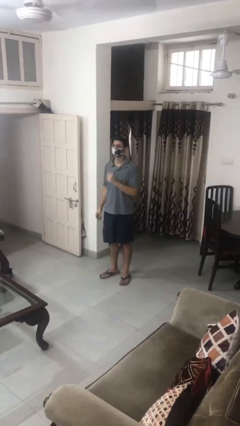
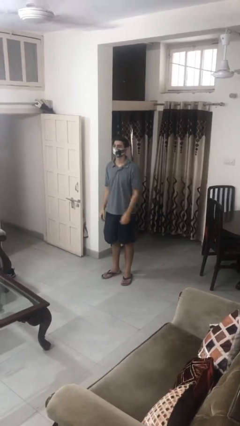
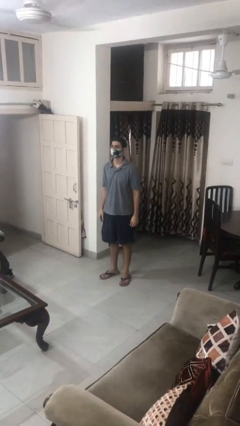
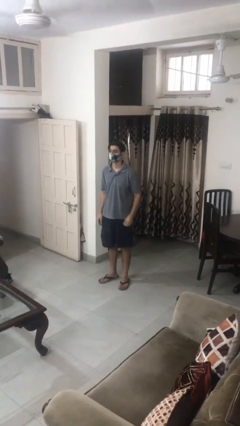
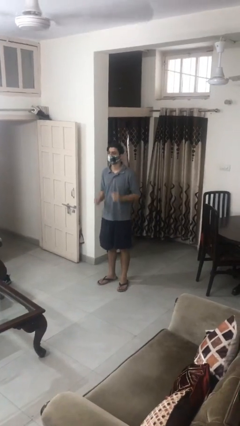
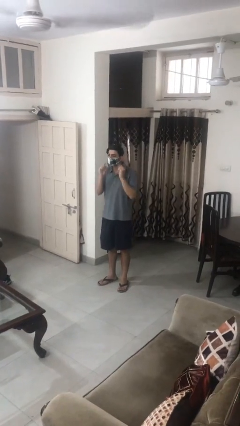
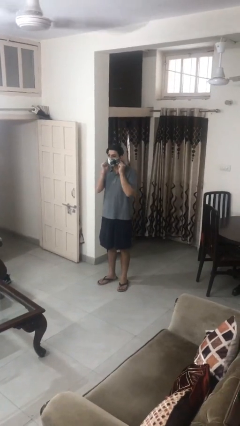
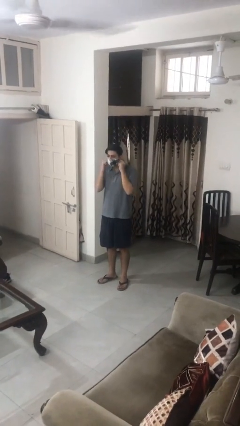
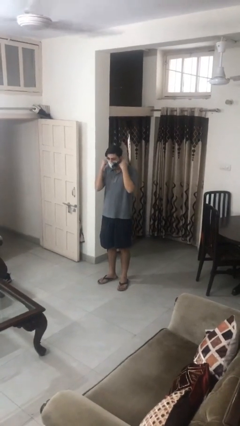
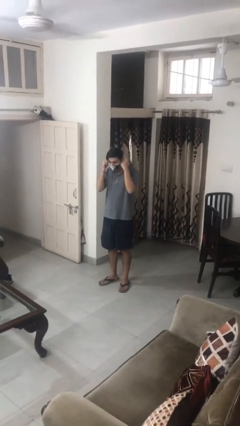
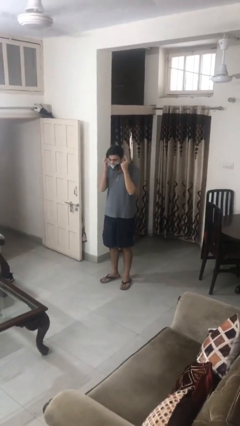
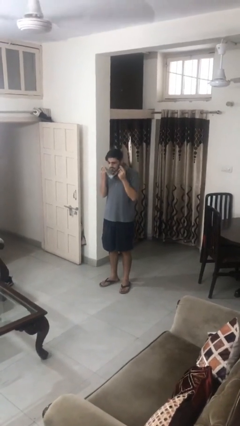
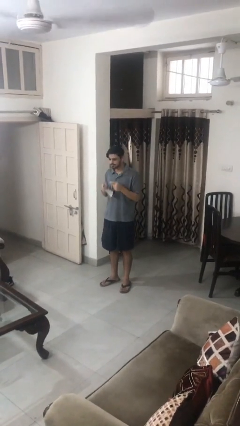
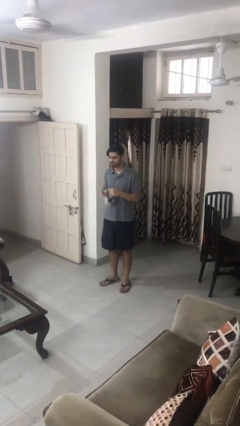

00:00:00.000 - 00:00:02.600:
person takes off facemask

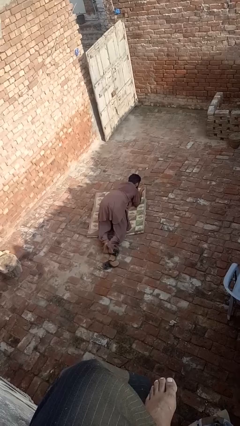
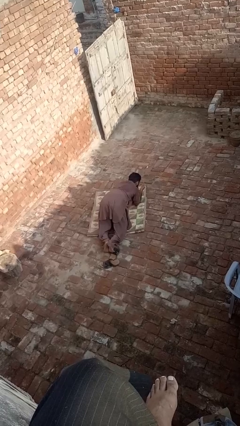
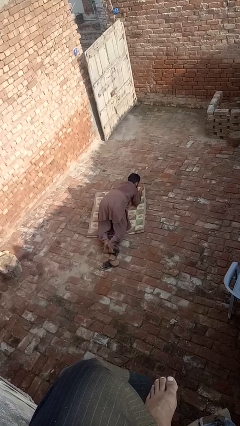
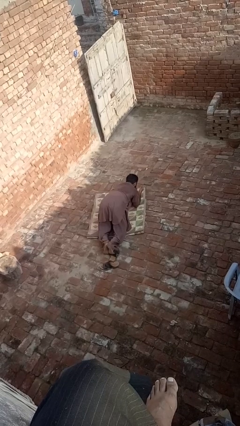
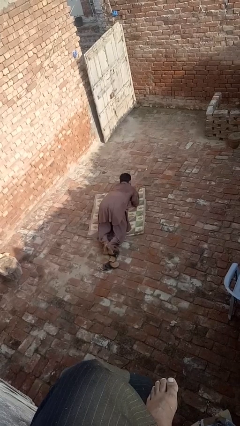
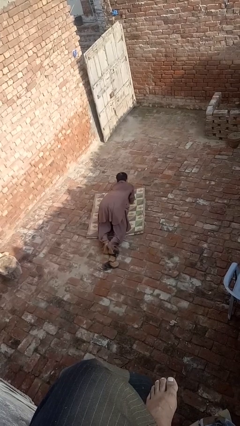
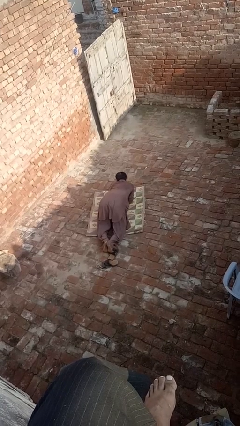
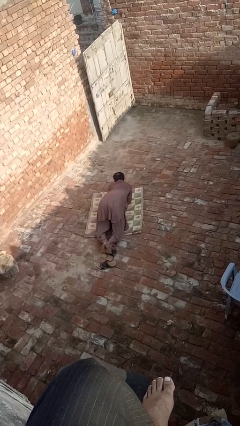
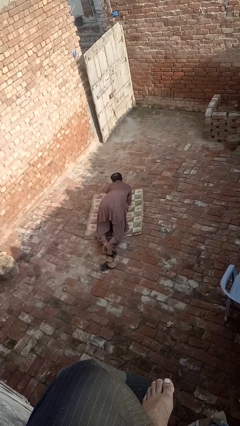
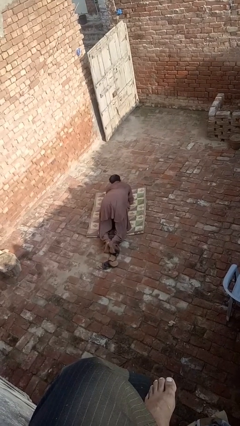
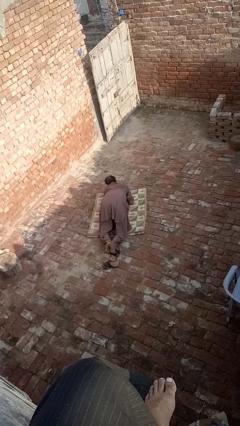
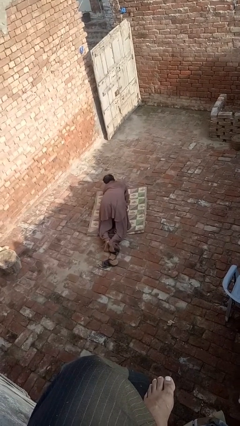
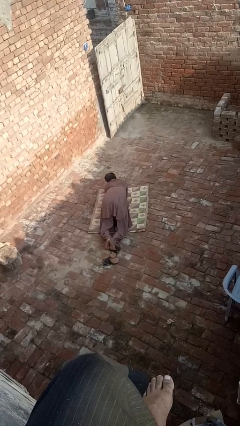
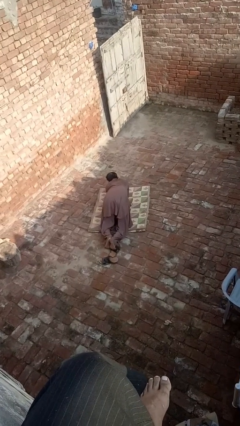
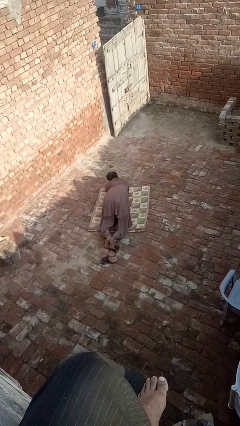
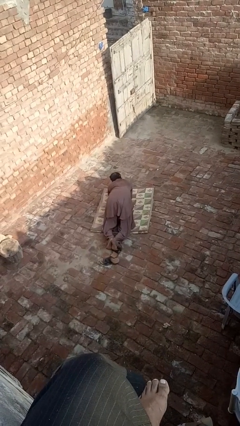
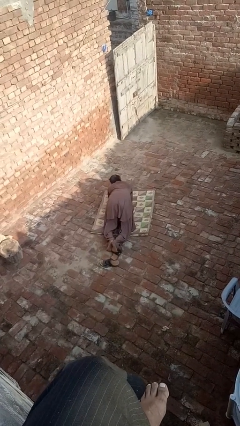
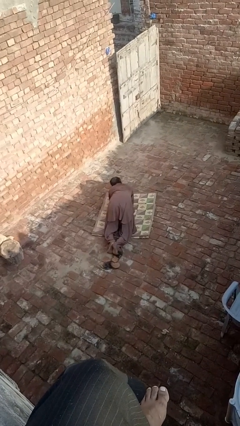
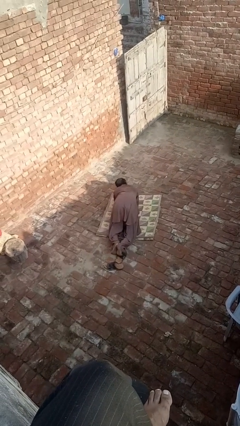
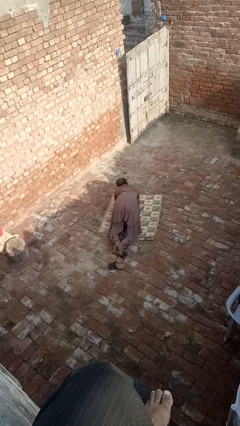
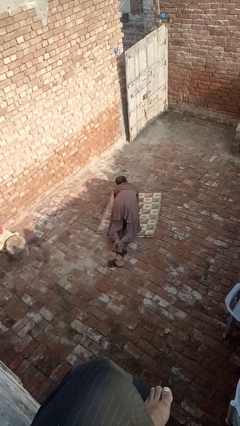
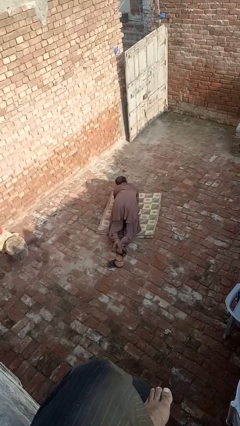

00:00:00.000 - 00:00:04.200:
person crawls

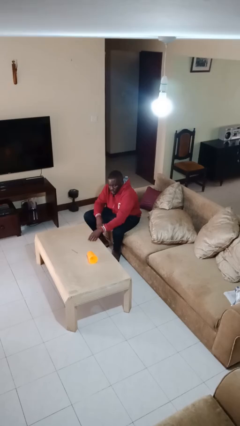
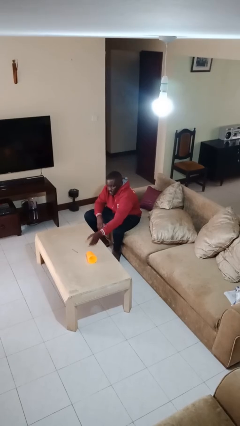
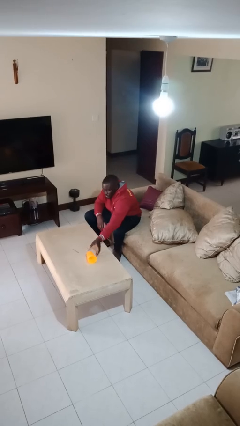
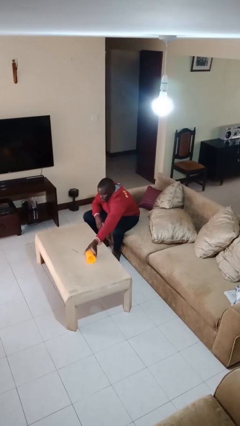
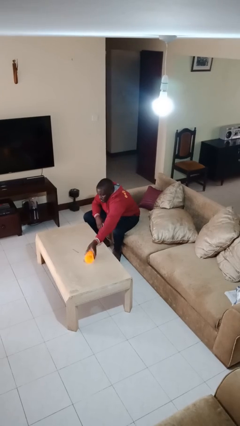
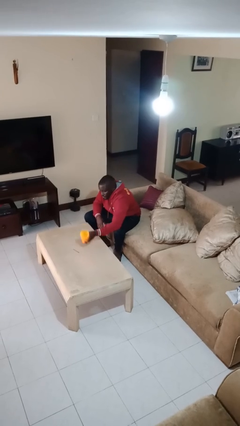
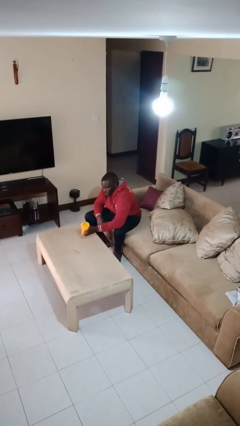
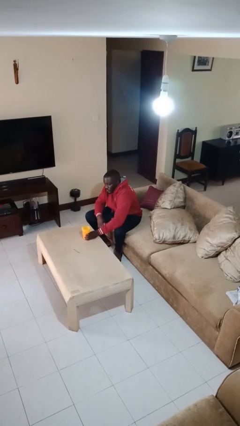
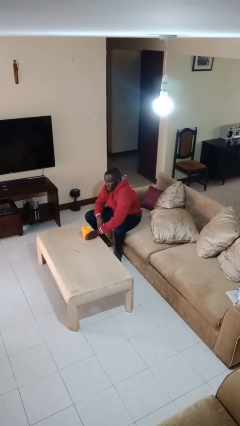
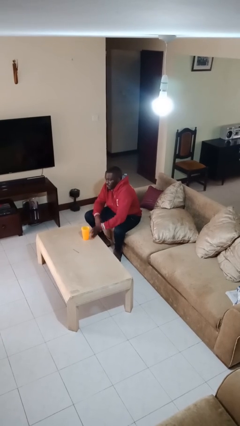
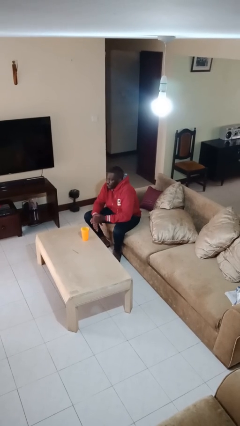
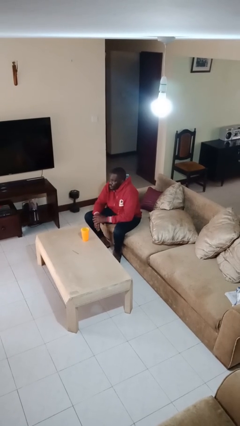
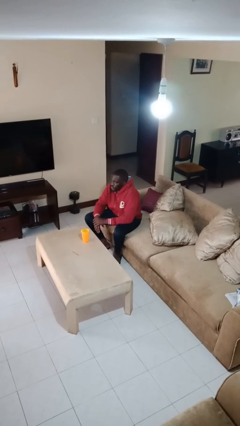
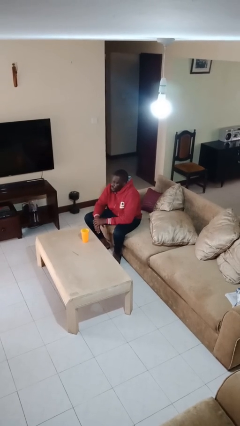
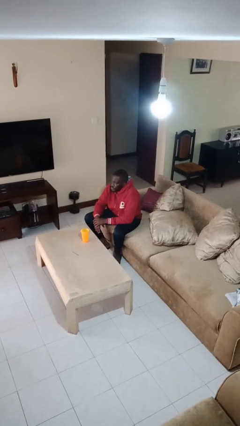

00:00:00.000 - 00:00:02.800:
person sets upright glass

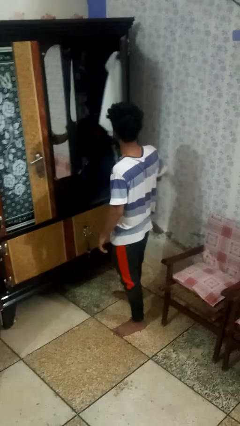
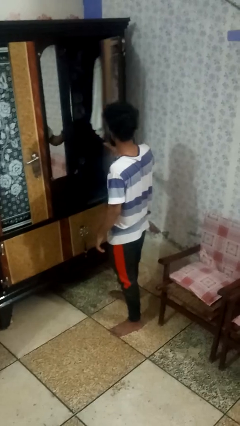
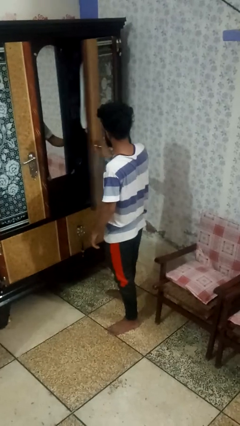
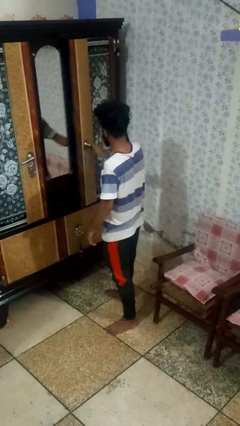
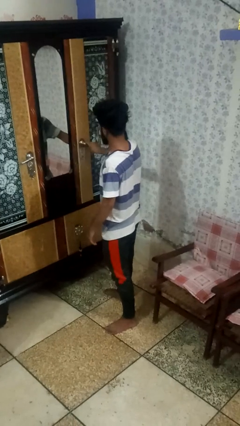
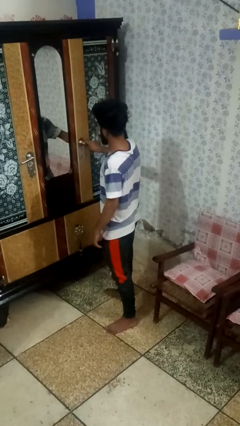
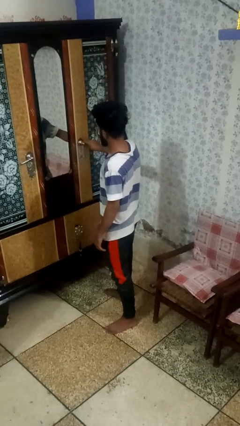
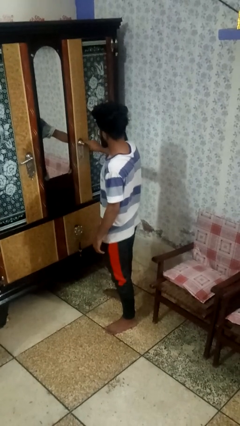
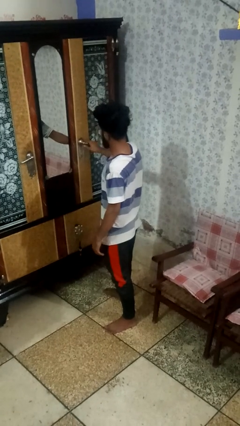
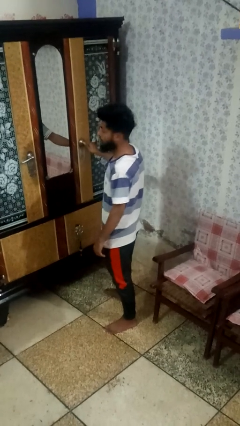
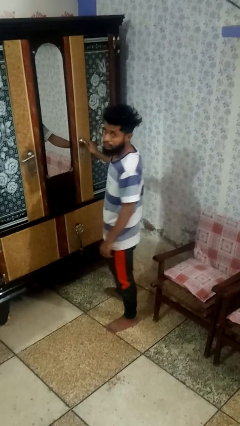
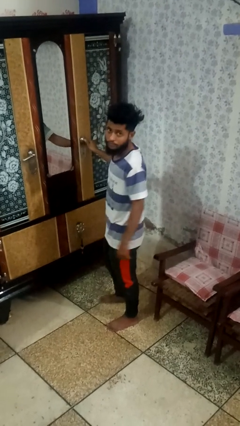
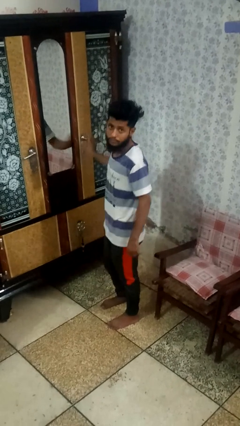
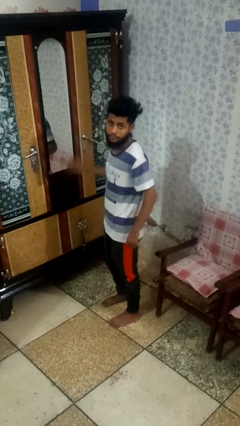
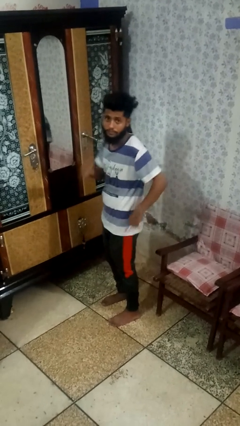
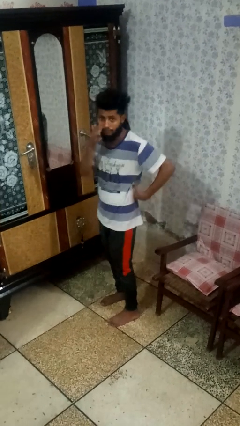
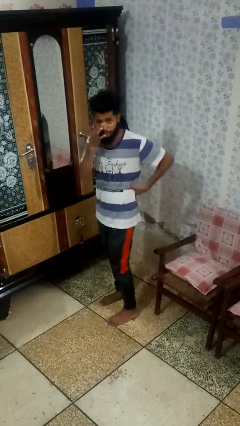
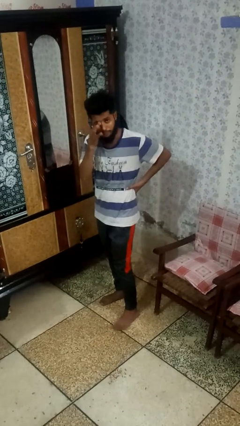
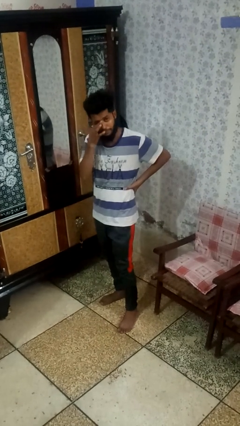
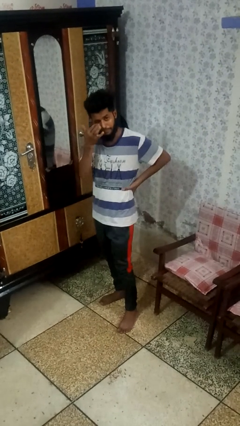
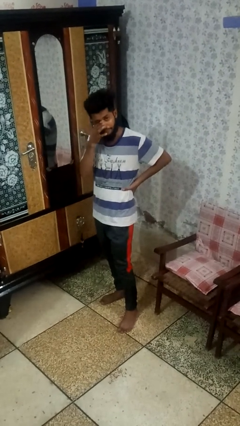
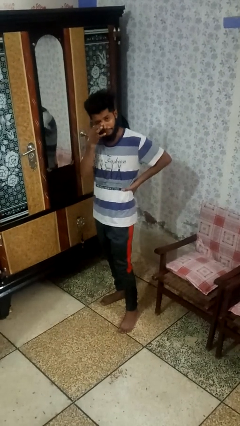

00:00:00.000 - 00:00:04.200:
person closes dresser drawer

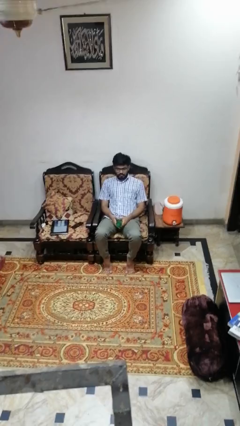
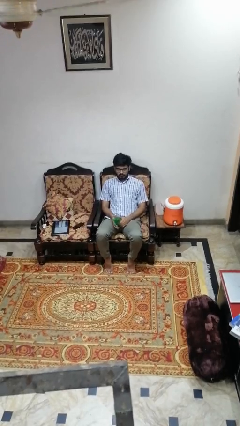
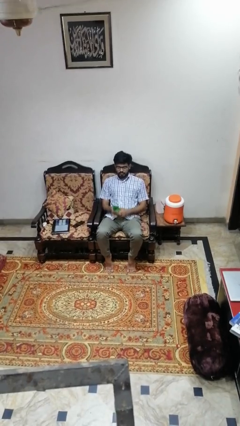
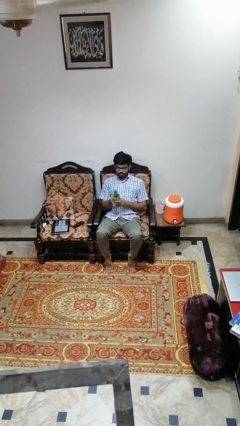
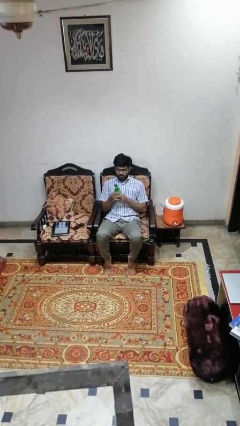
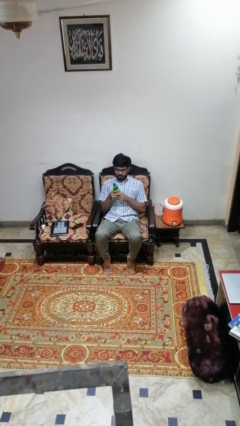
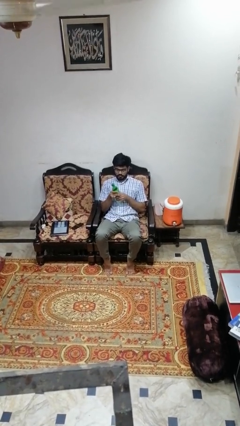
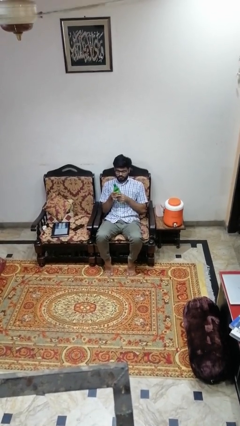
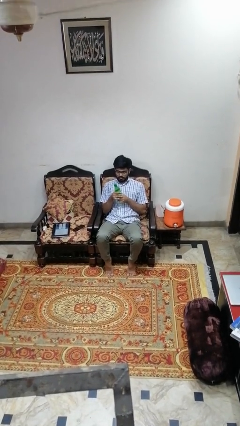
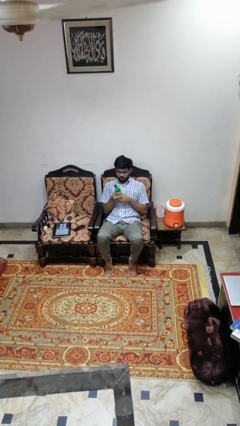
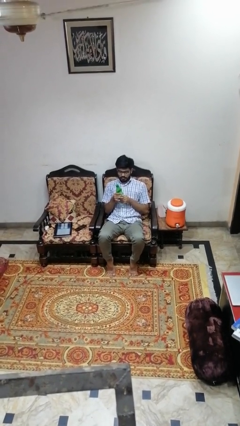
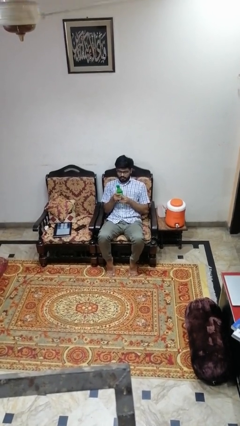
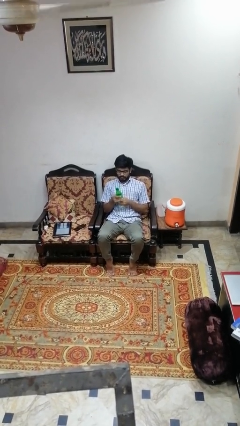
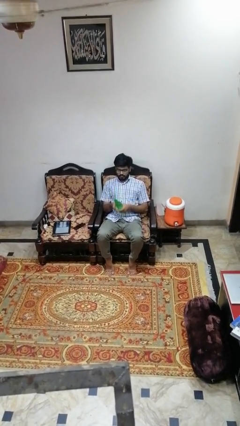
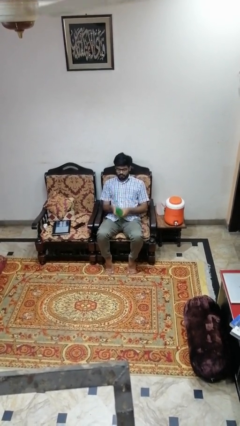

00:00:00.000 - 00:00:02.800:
person squeezes object
